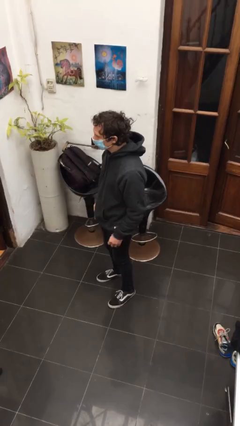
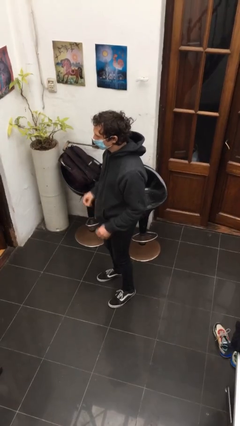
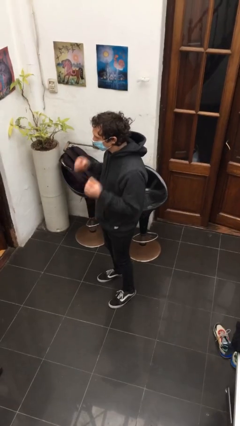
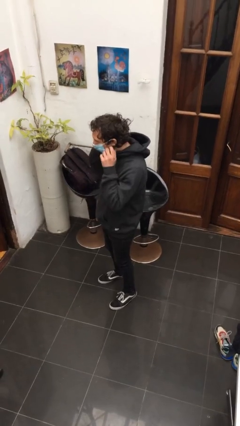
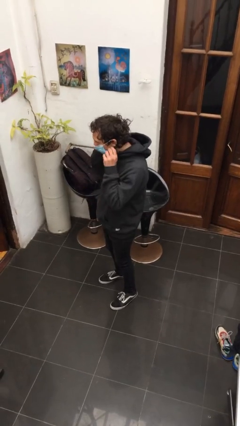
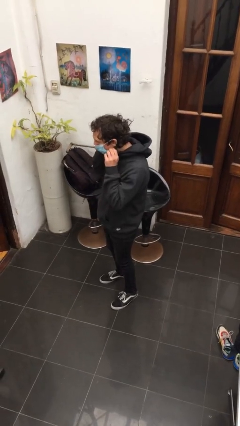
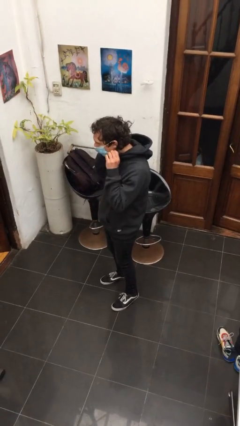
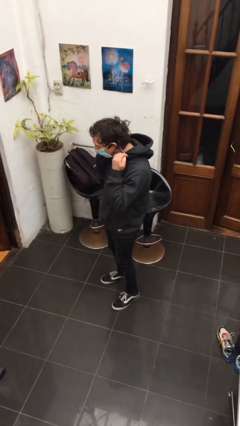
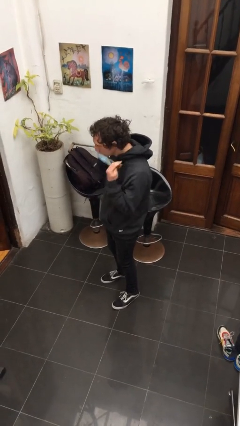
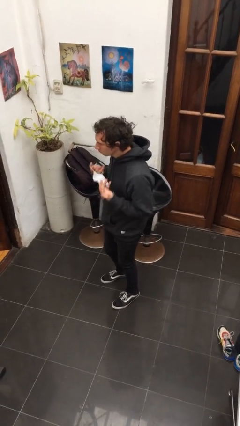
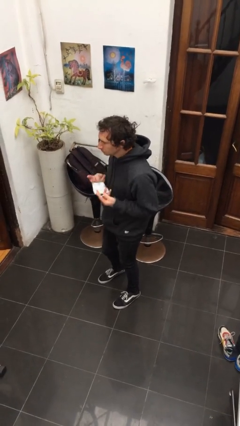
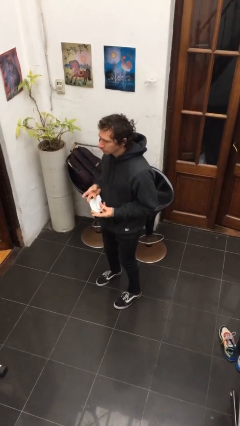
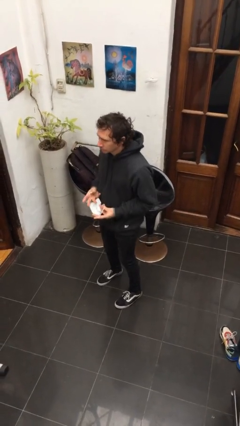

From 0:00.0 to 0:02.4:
person takes off facemask

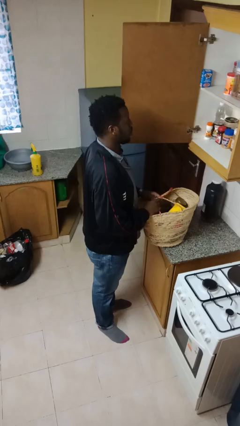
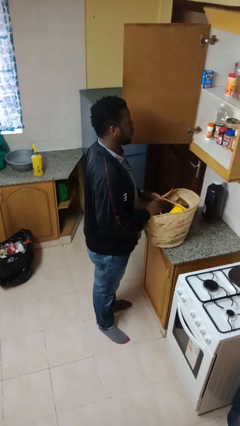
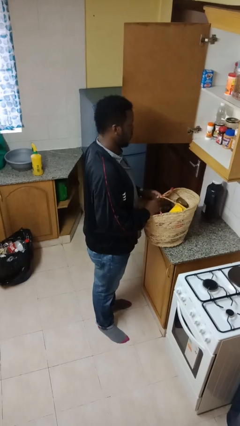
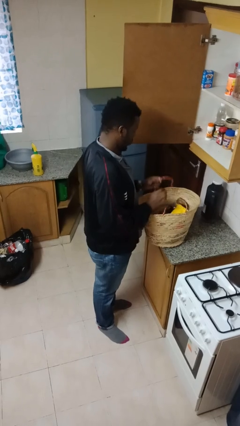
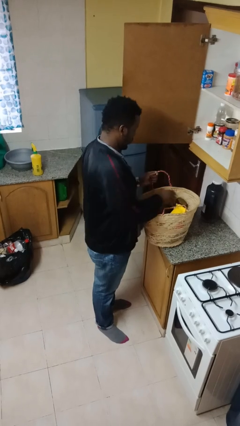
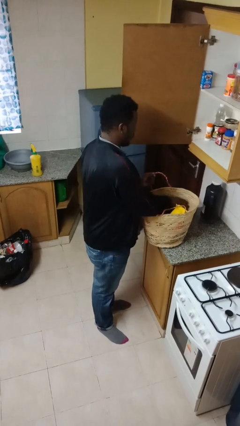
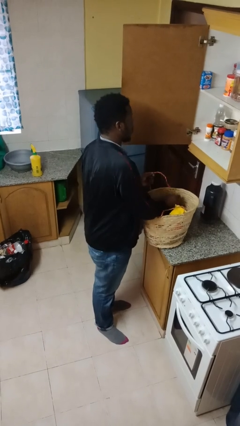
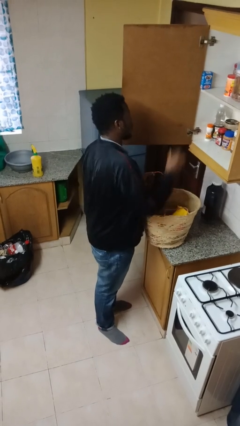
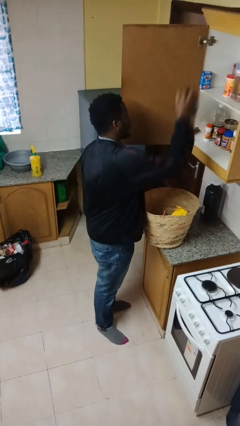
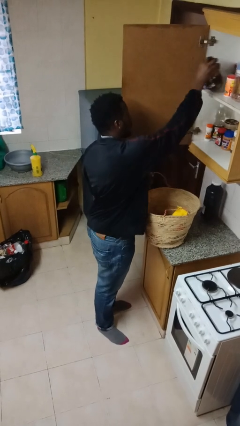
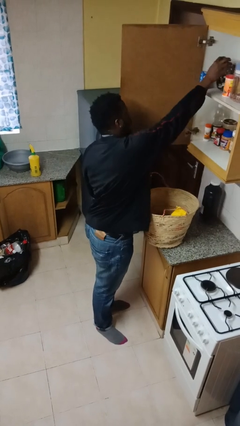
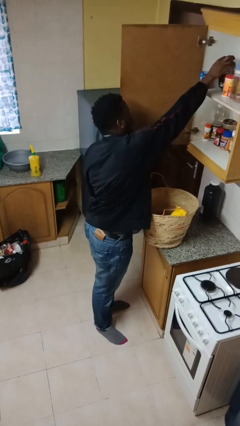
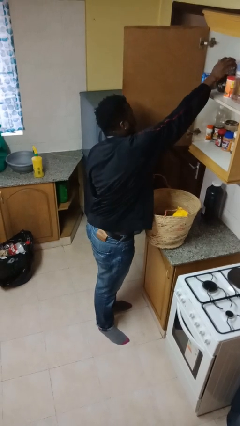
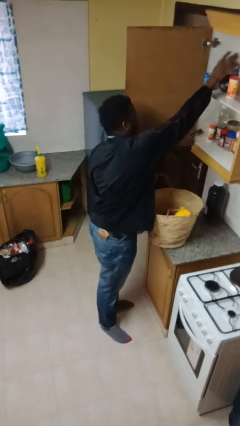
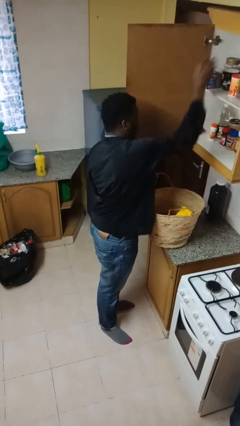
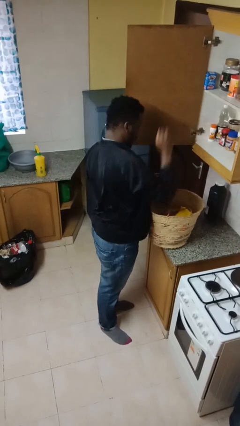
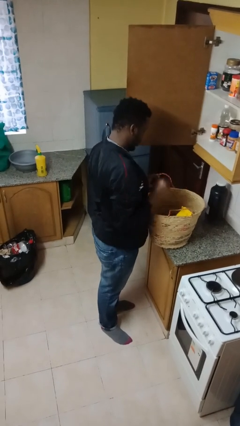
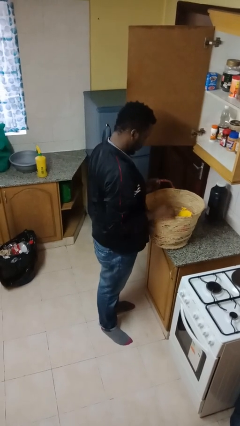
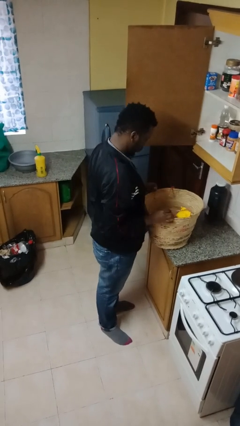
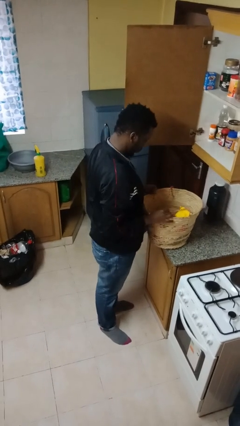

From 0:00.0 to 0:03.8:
person loads groceries into cabinet

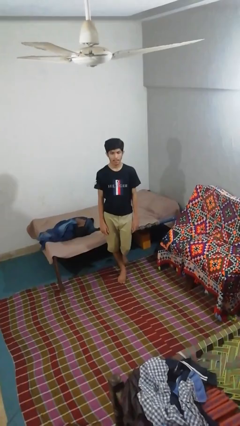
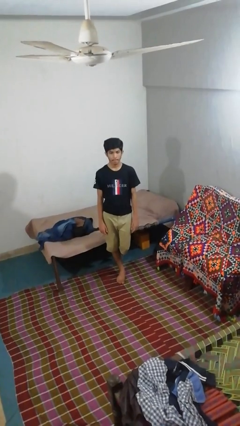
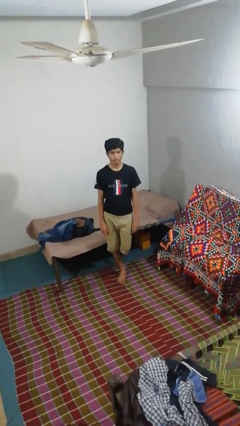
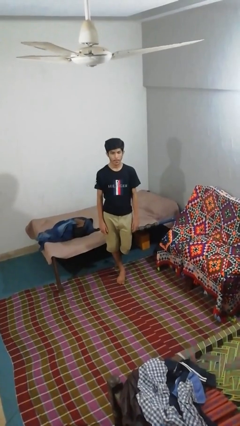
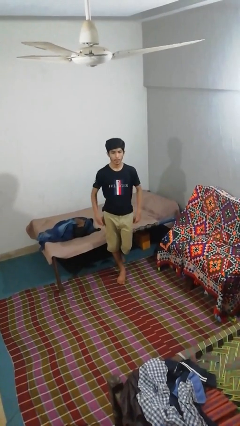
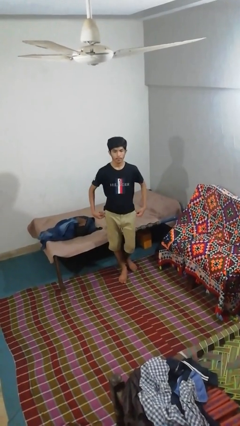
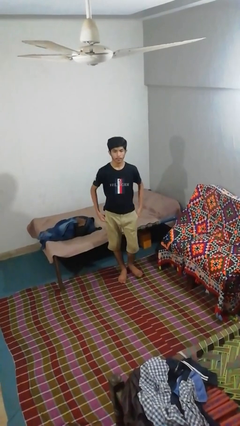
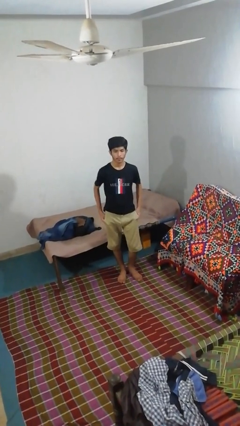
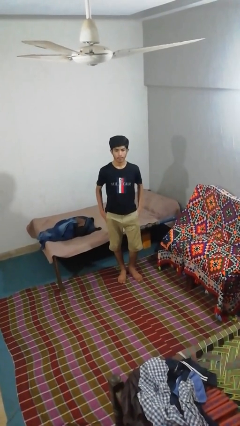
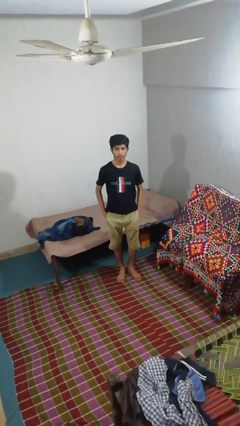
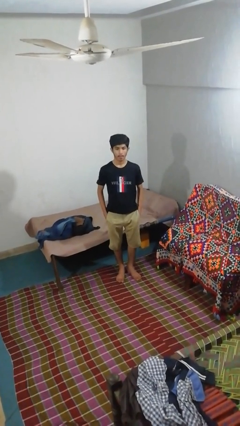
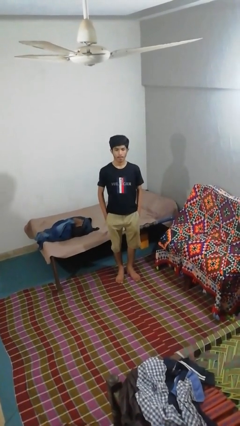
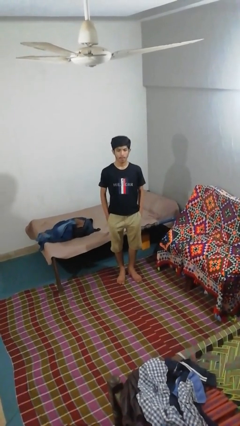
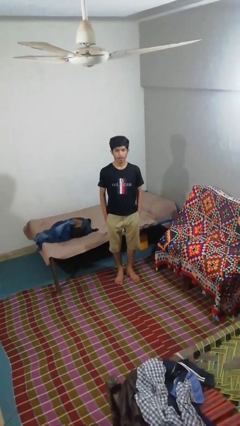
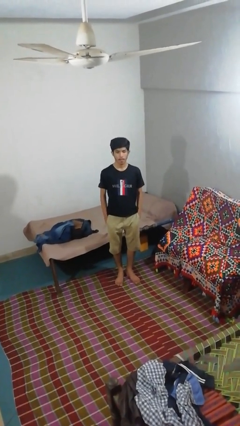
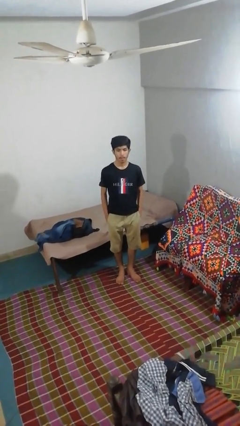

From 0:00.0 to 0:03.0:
person puts hands in back pockets

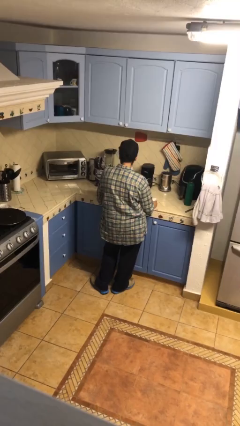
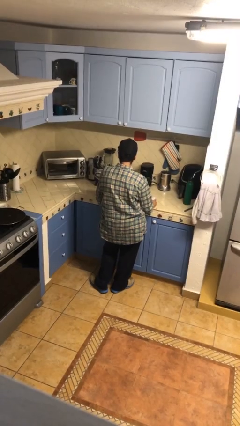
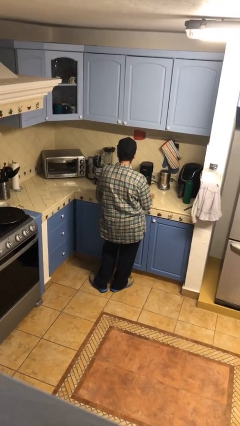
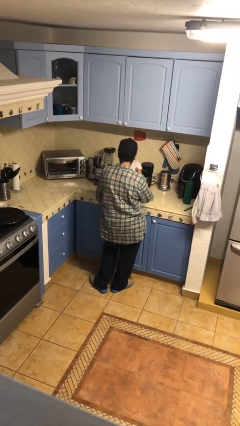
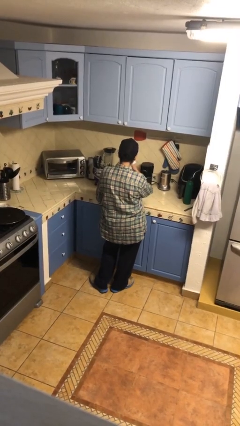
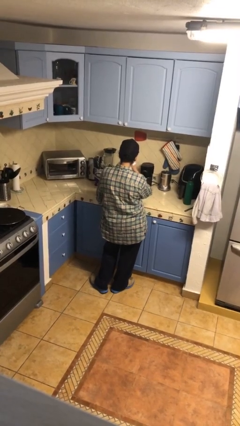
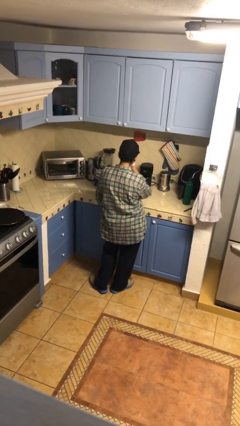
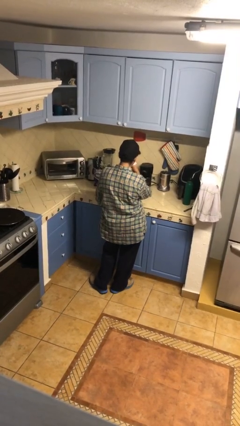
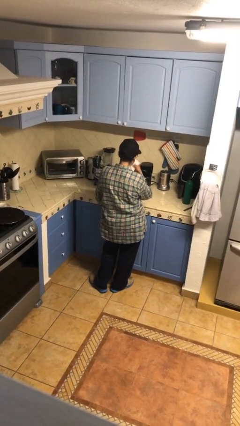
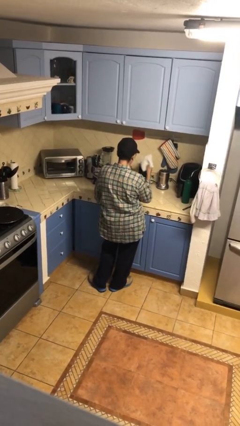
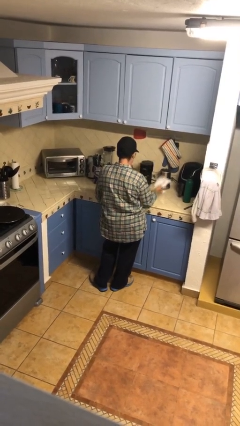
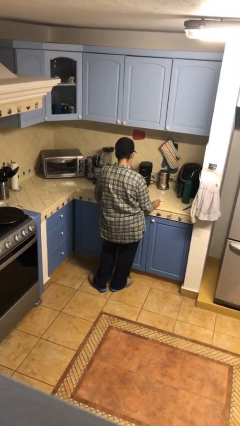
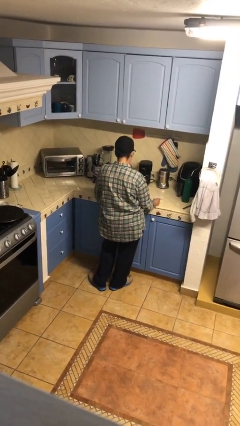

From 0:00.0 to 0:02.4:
person wipes mouth with napkin

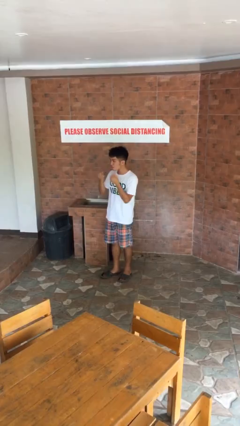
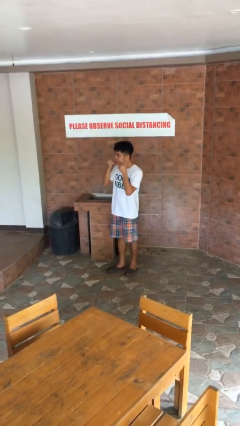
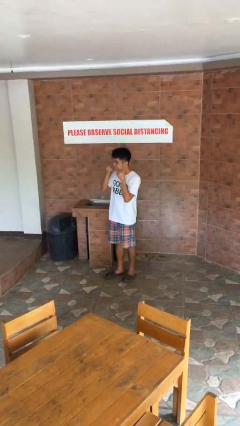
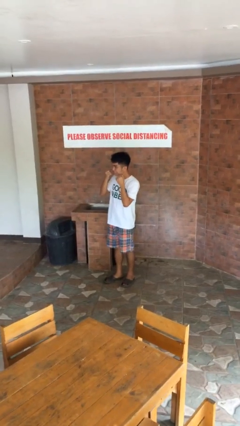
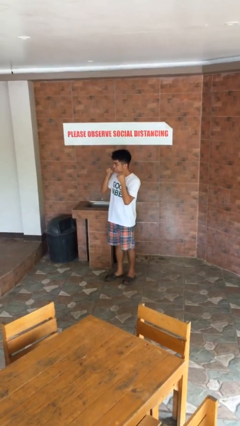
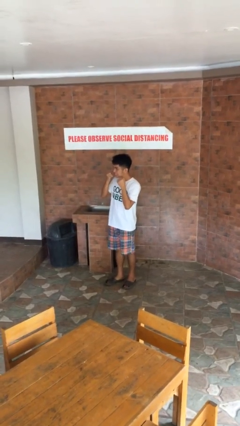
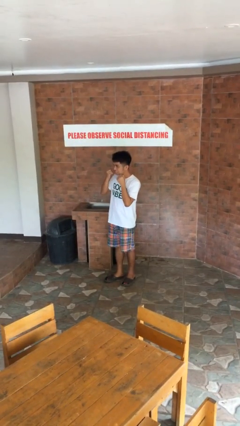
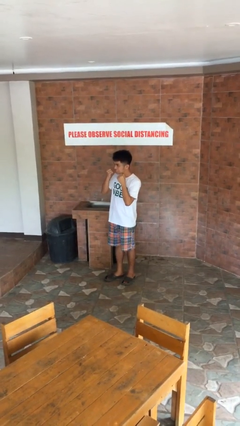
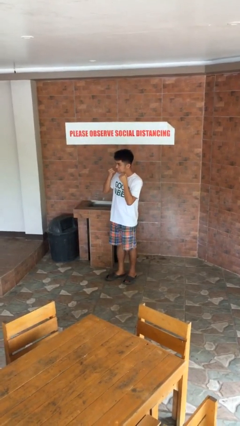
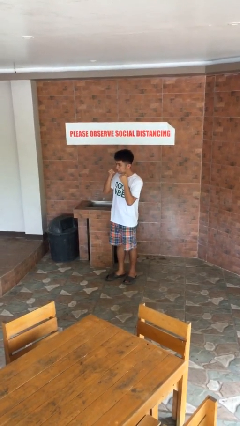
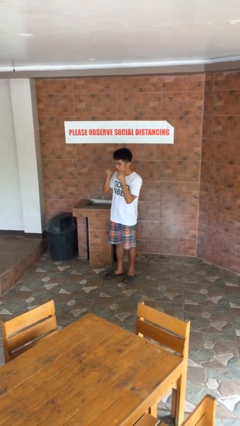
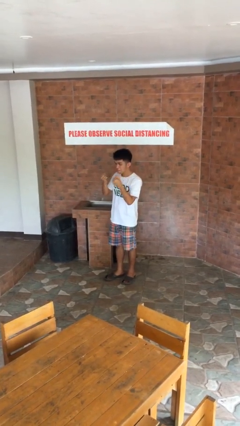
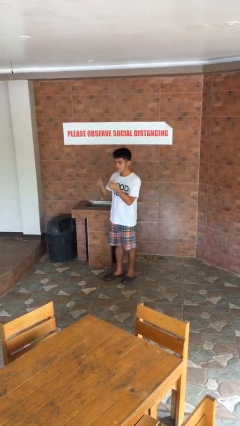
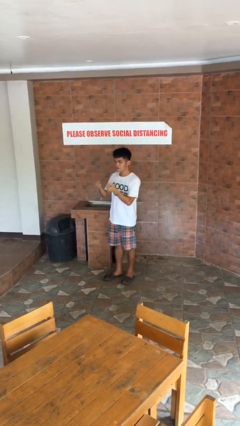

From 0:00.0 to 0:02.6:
person flosses

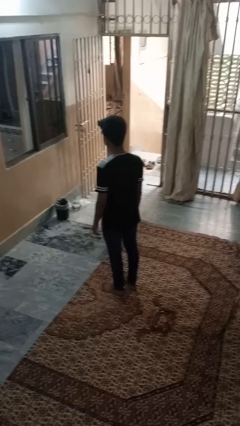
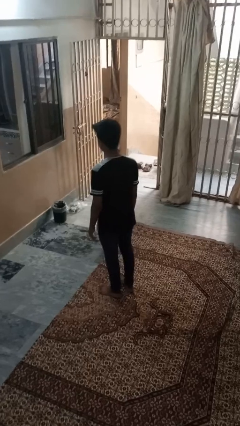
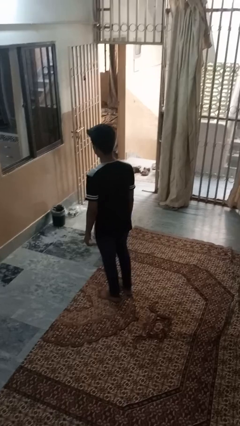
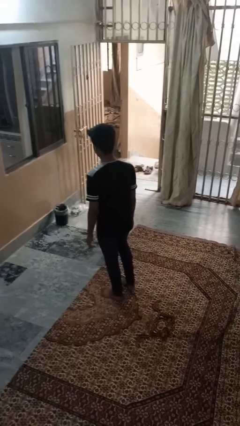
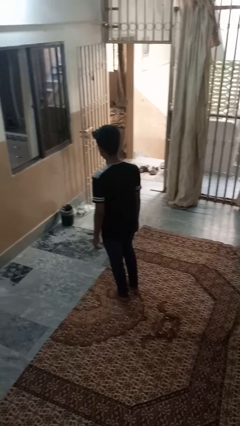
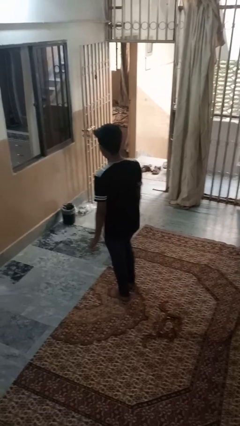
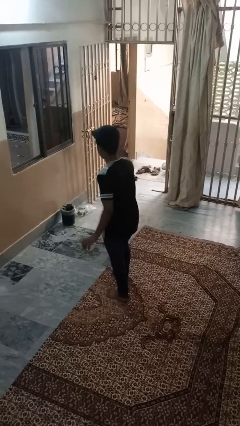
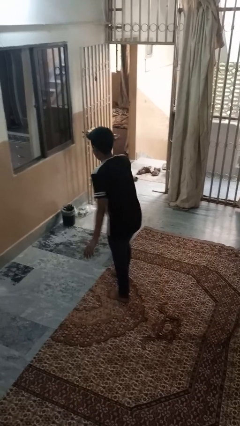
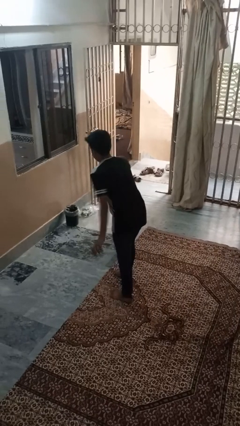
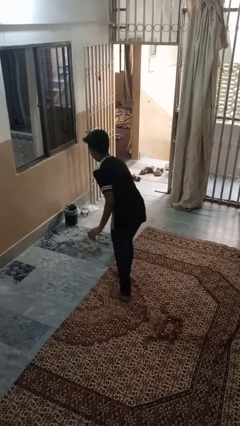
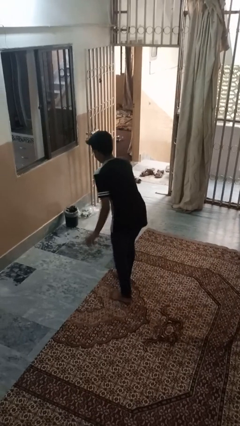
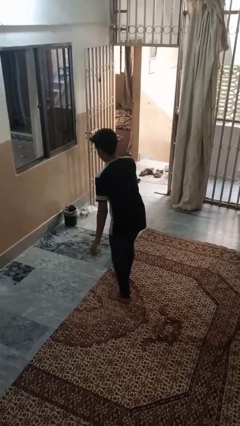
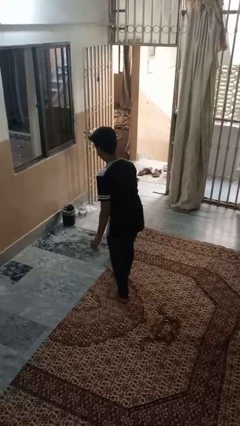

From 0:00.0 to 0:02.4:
person dances in place
